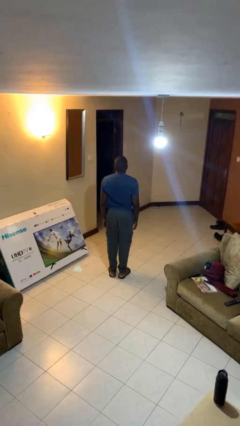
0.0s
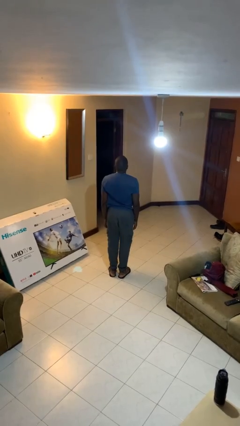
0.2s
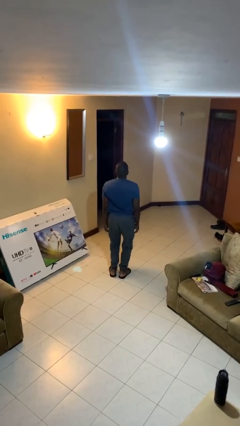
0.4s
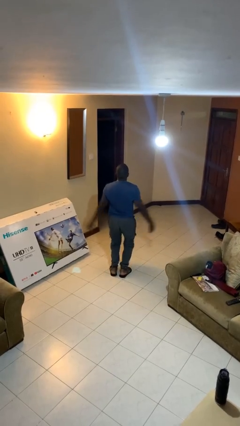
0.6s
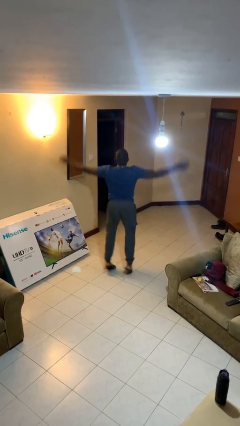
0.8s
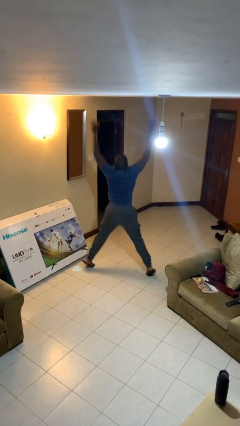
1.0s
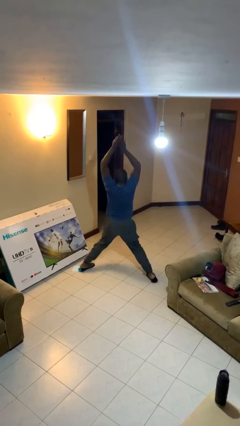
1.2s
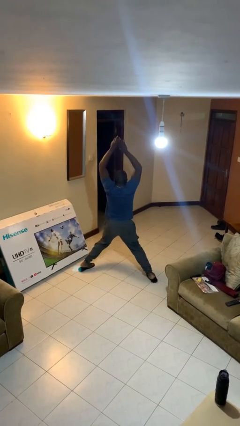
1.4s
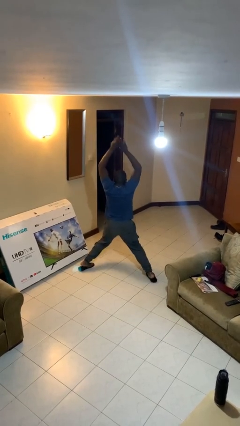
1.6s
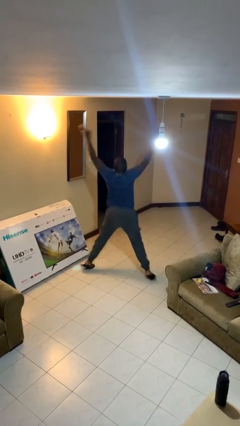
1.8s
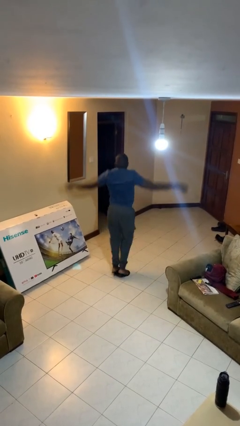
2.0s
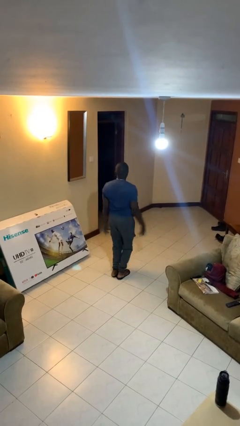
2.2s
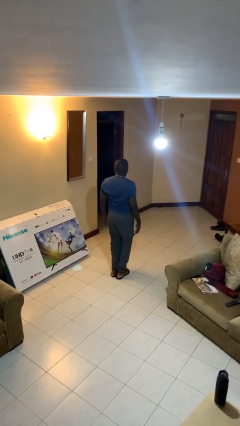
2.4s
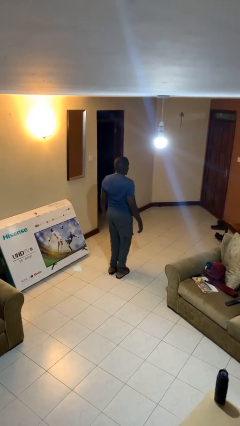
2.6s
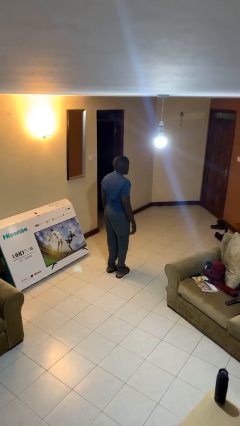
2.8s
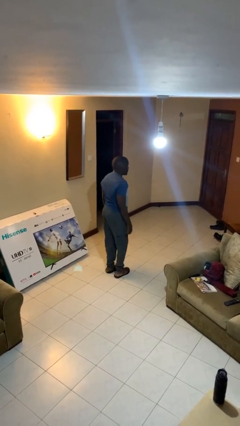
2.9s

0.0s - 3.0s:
person exercises with jumping jacks

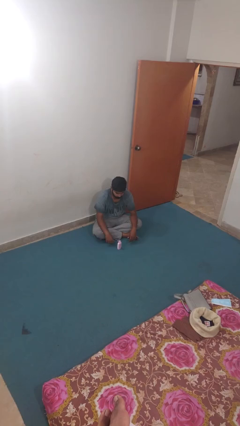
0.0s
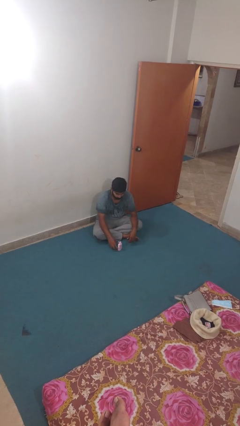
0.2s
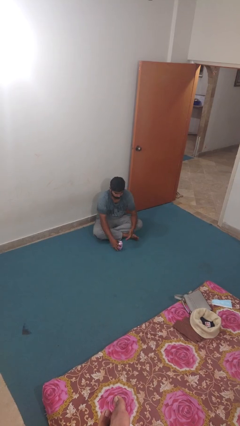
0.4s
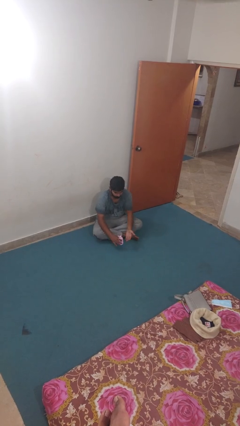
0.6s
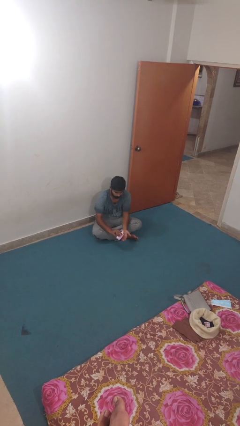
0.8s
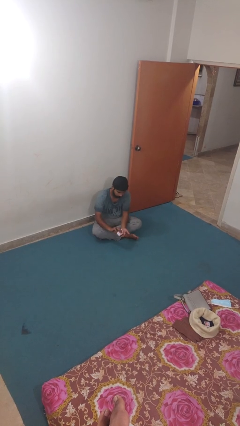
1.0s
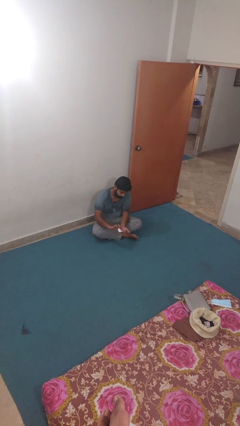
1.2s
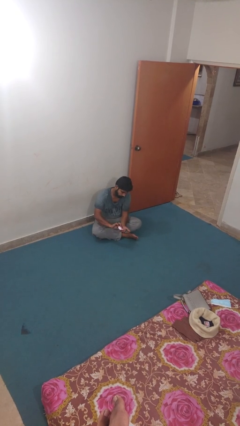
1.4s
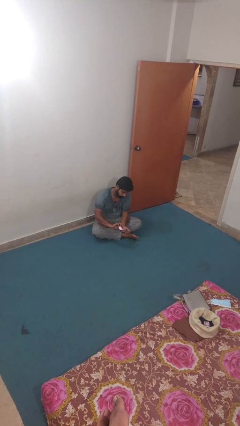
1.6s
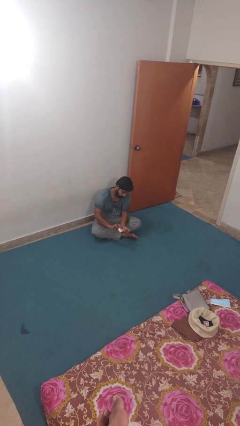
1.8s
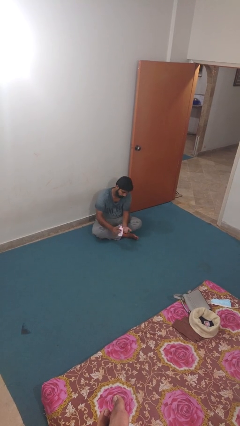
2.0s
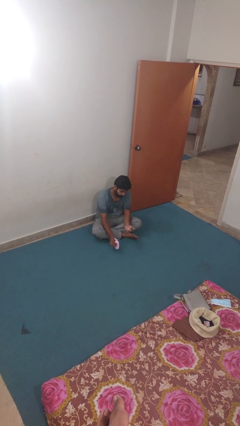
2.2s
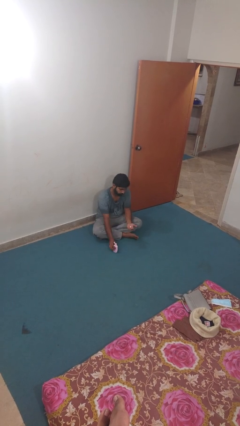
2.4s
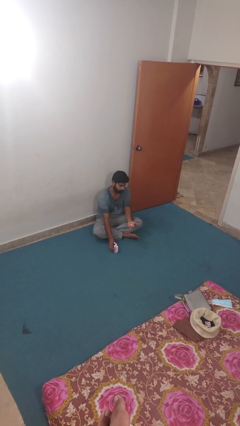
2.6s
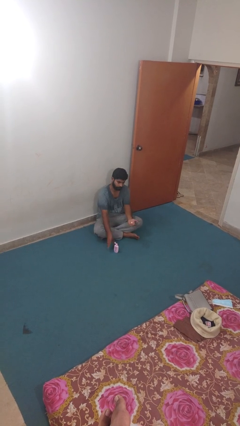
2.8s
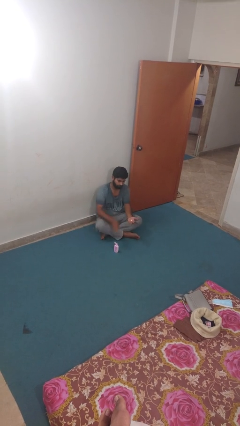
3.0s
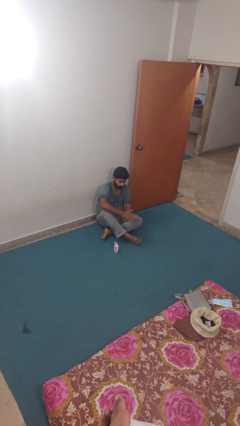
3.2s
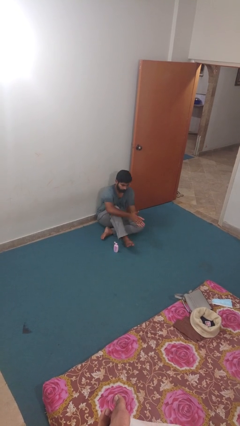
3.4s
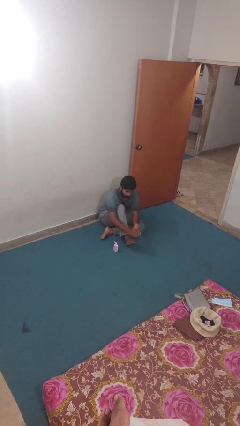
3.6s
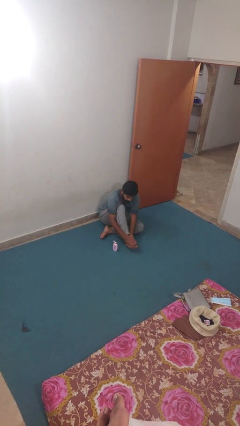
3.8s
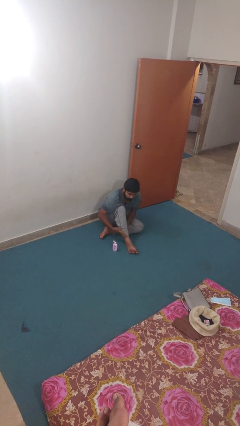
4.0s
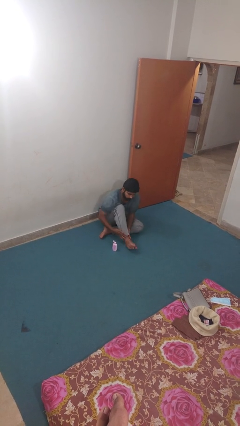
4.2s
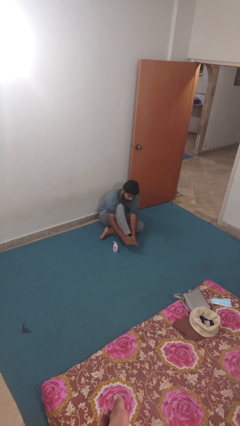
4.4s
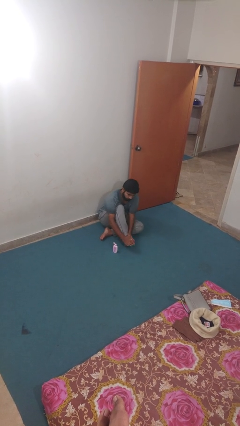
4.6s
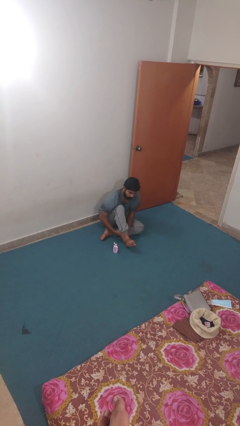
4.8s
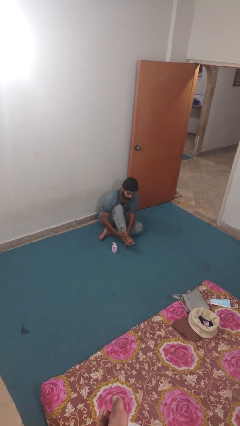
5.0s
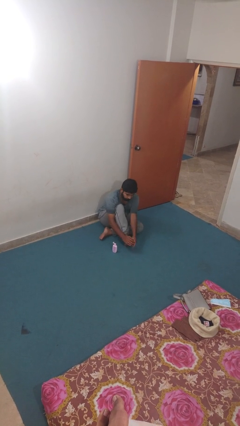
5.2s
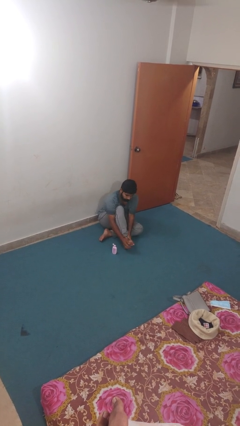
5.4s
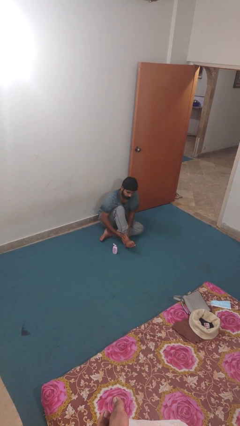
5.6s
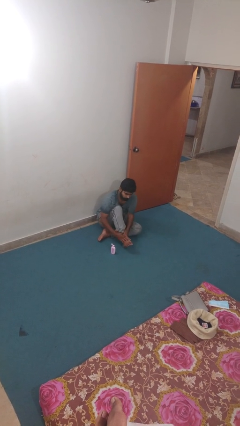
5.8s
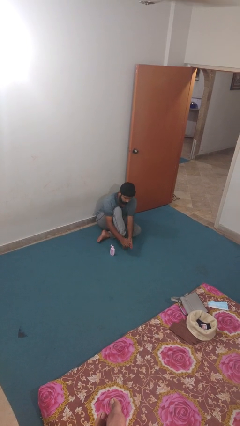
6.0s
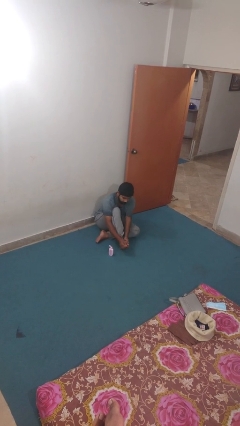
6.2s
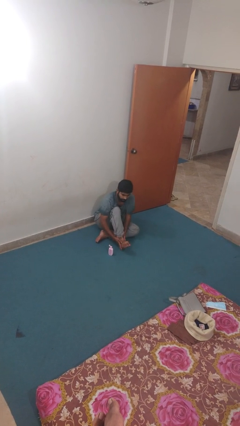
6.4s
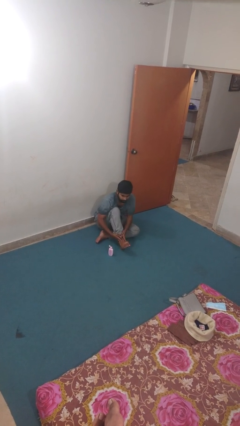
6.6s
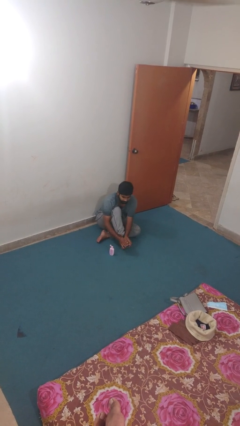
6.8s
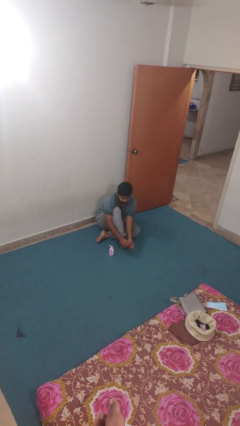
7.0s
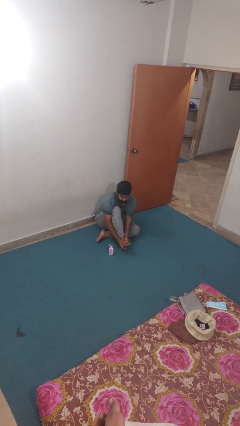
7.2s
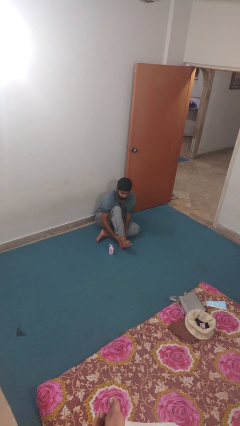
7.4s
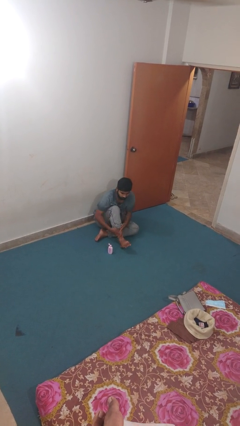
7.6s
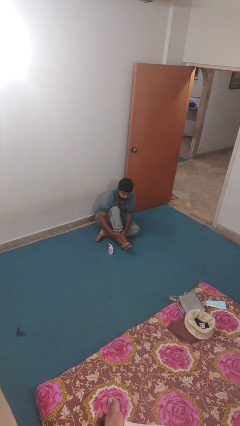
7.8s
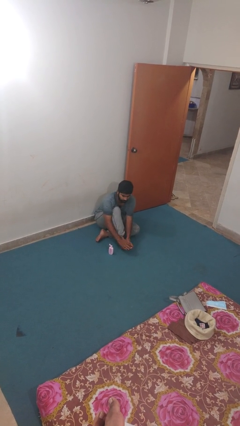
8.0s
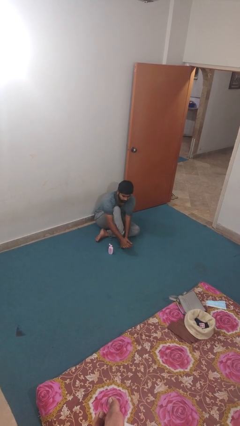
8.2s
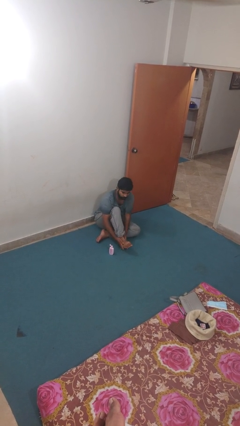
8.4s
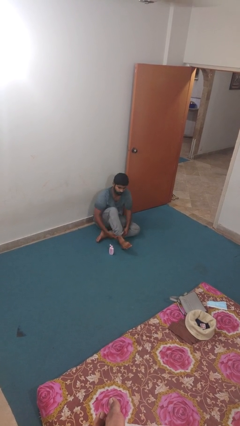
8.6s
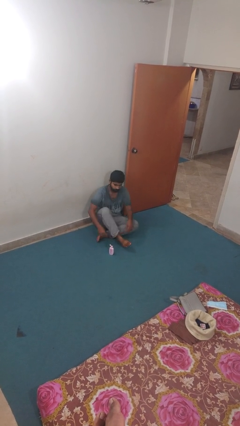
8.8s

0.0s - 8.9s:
person applies sunscreen

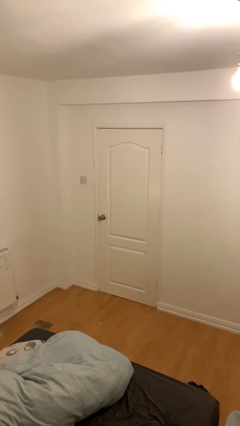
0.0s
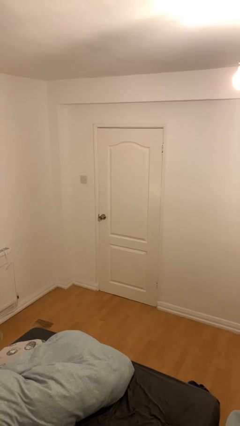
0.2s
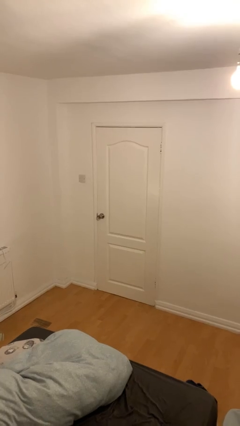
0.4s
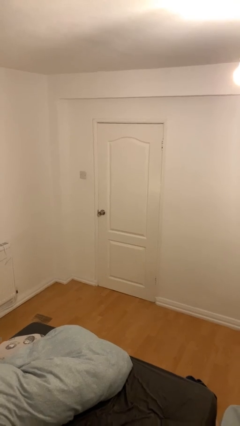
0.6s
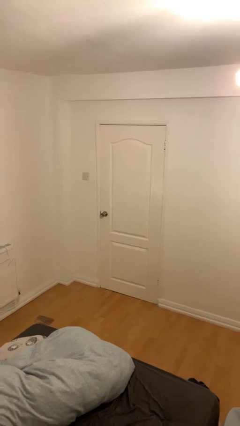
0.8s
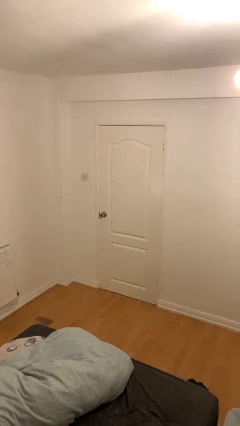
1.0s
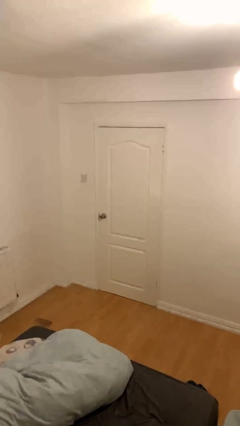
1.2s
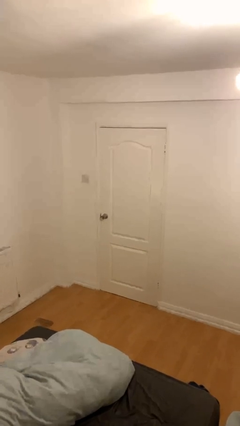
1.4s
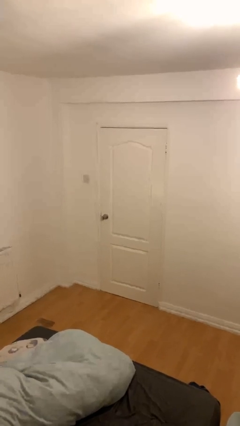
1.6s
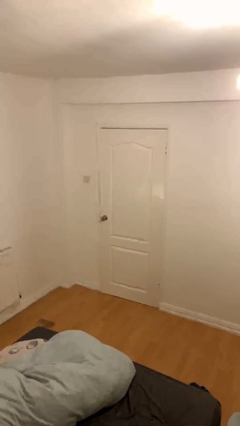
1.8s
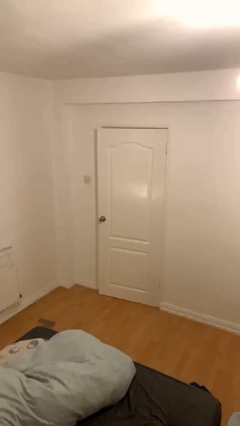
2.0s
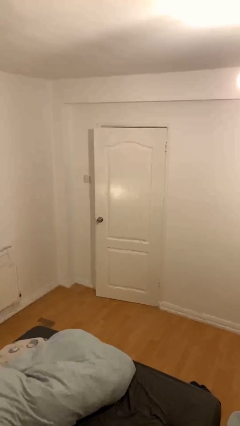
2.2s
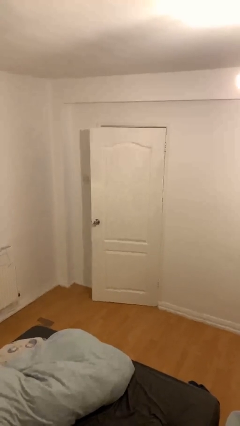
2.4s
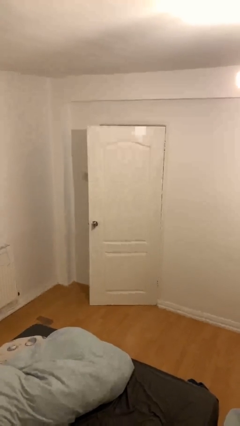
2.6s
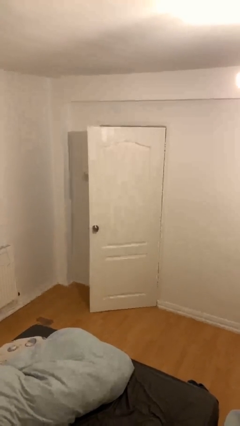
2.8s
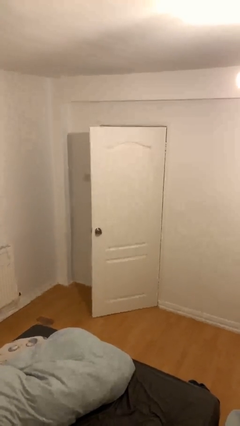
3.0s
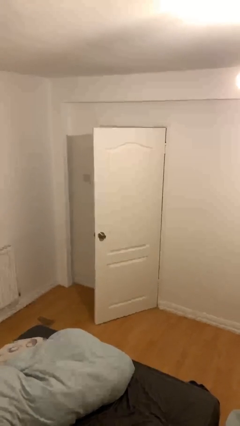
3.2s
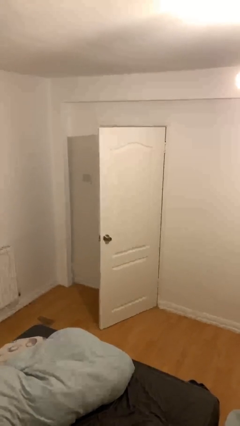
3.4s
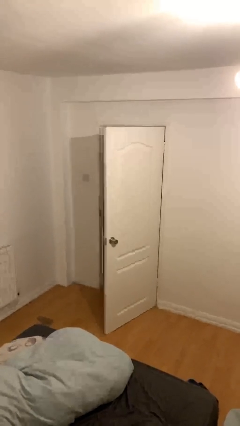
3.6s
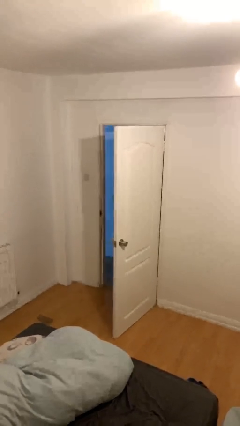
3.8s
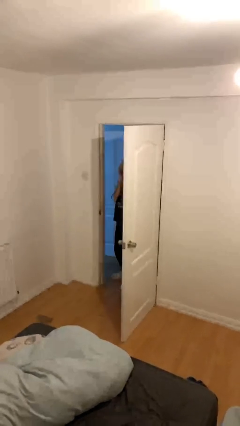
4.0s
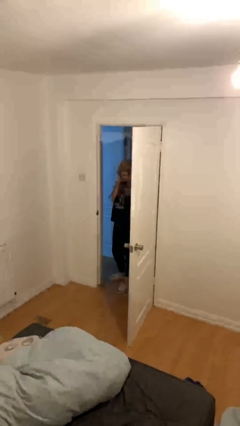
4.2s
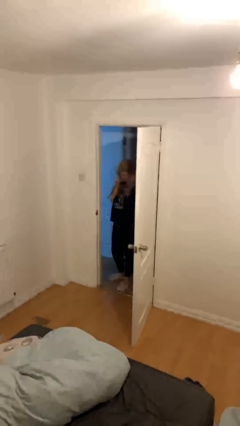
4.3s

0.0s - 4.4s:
person opens facility door

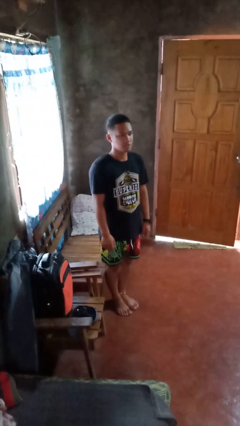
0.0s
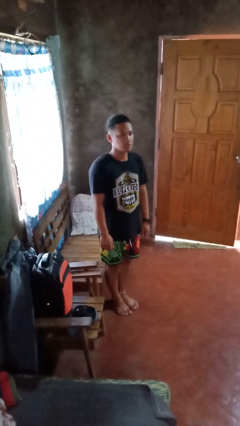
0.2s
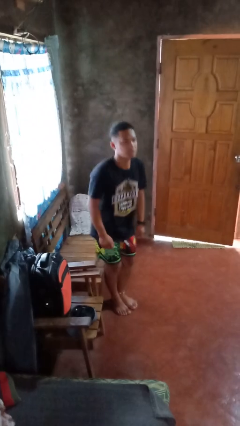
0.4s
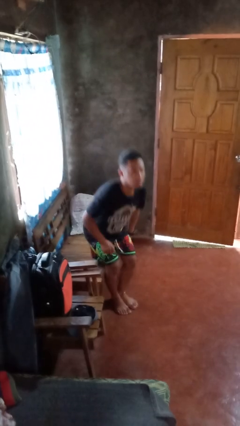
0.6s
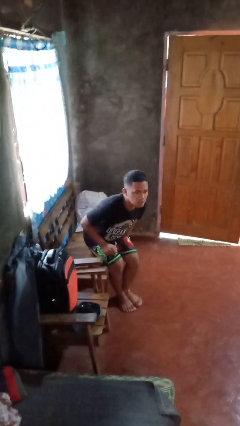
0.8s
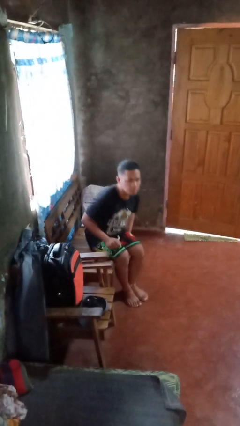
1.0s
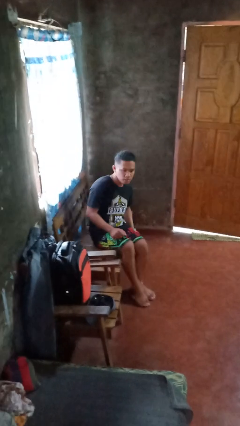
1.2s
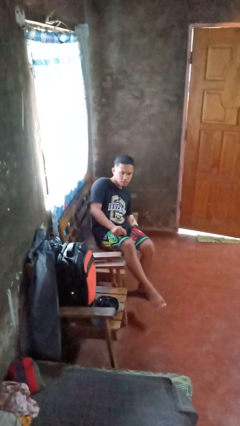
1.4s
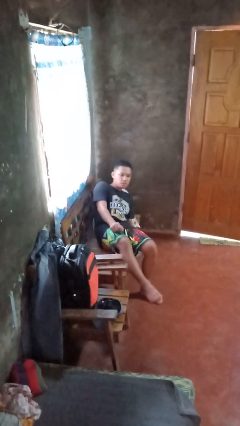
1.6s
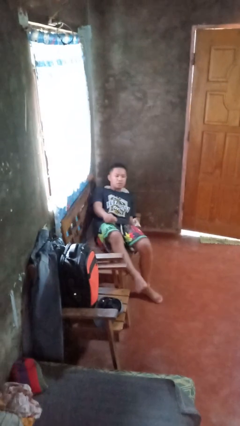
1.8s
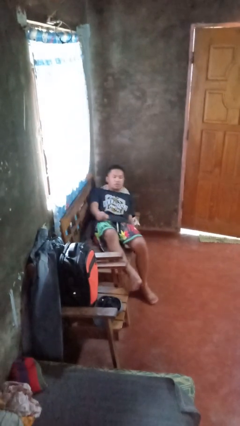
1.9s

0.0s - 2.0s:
person lies down on couch
